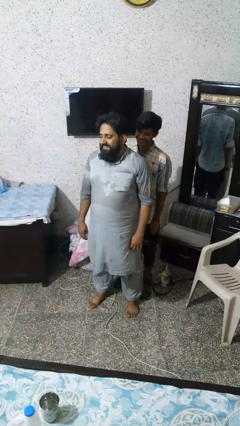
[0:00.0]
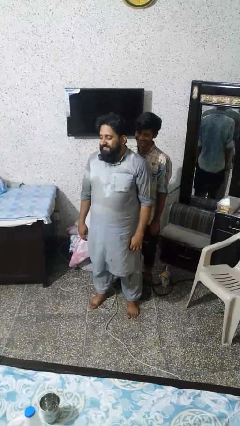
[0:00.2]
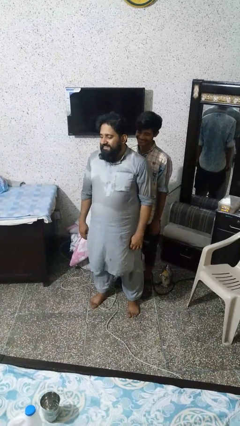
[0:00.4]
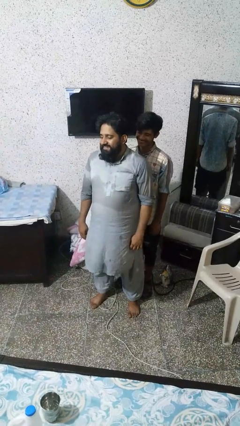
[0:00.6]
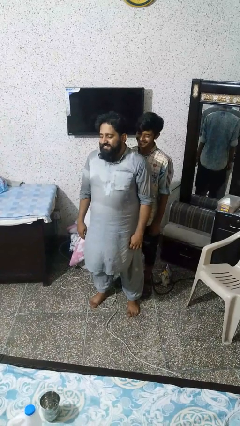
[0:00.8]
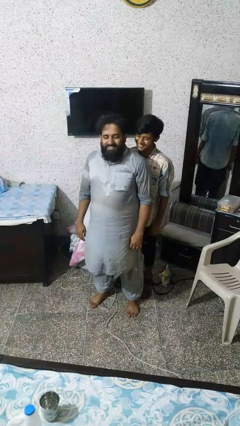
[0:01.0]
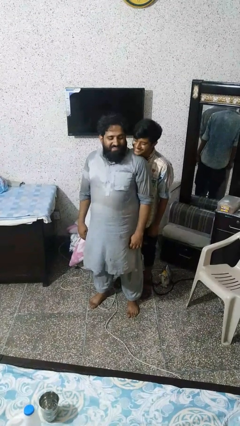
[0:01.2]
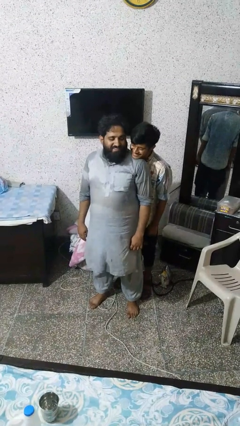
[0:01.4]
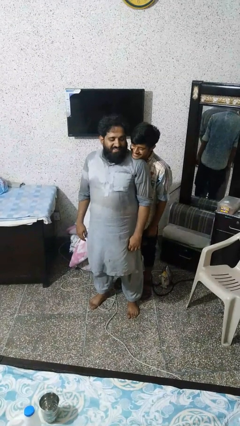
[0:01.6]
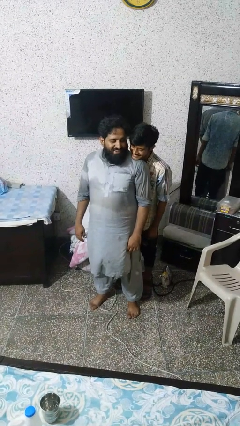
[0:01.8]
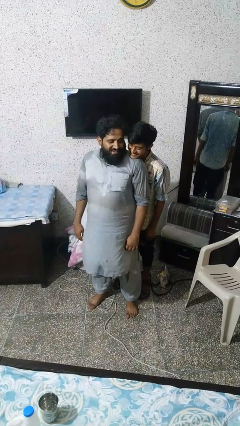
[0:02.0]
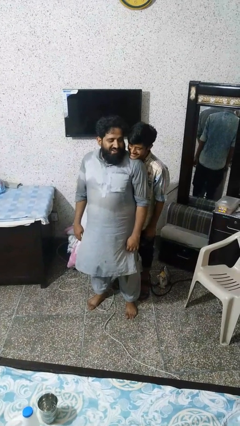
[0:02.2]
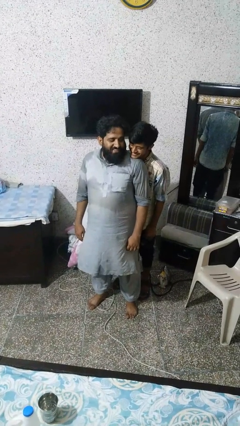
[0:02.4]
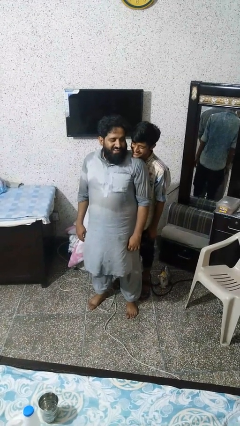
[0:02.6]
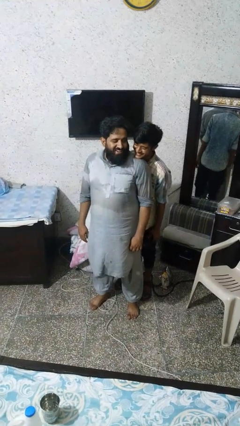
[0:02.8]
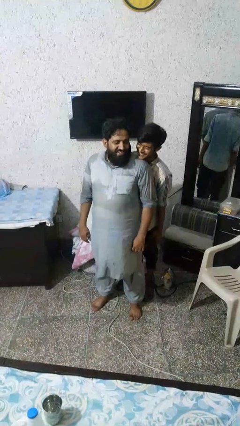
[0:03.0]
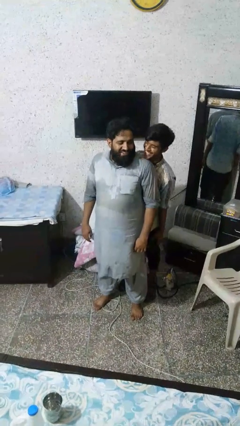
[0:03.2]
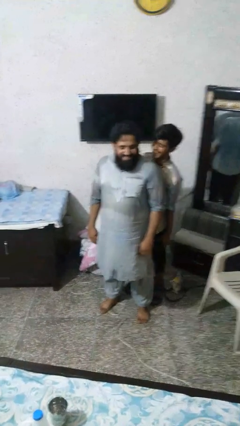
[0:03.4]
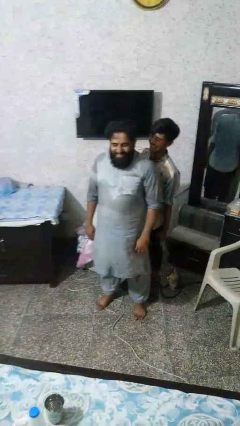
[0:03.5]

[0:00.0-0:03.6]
person looks over shoulder

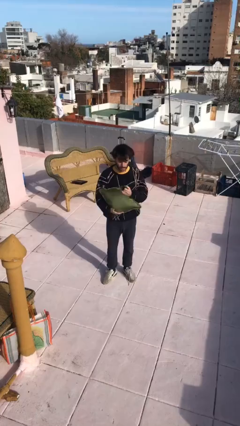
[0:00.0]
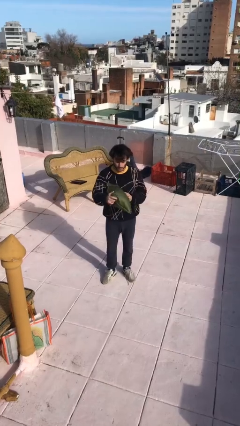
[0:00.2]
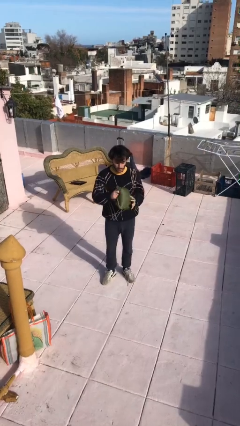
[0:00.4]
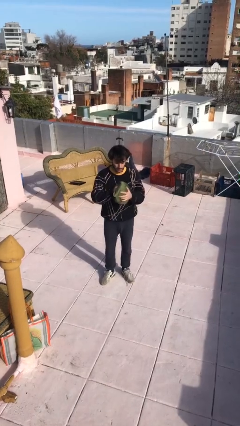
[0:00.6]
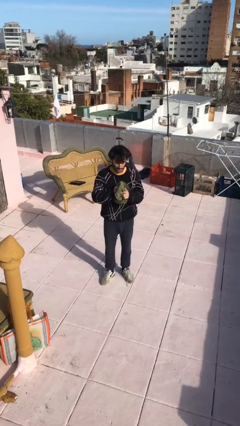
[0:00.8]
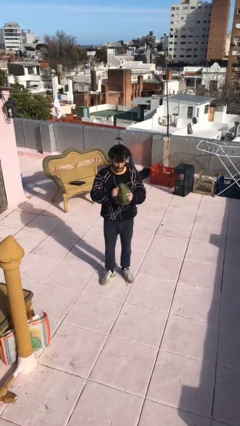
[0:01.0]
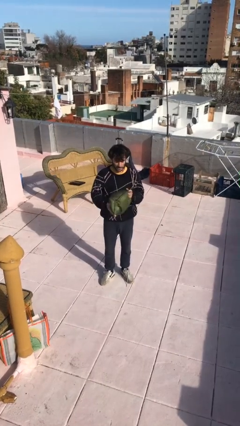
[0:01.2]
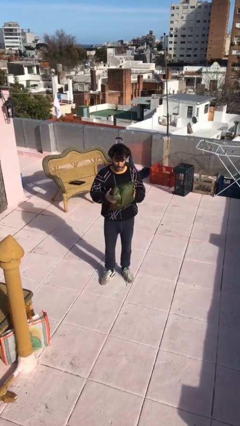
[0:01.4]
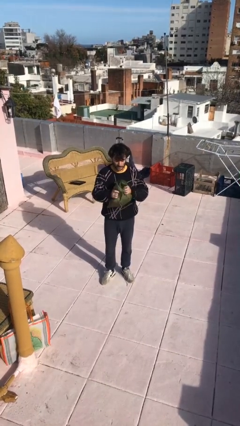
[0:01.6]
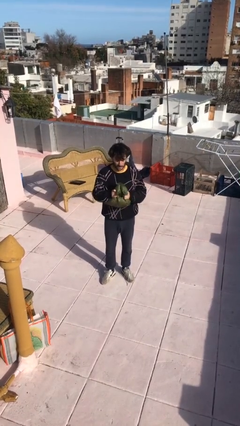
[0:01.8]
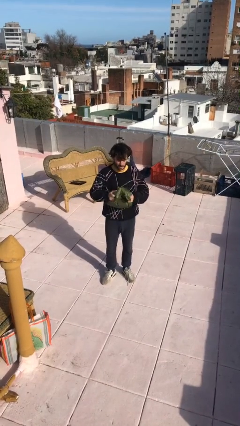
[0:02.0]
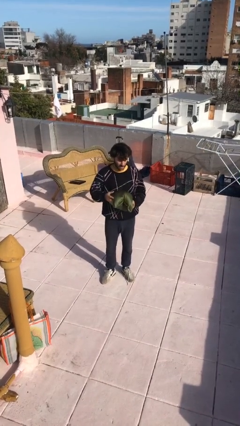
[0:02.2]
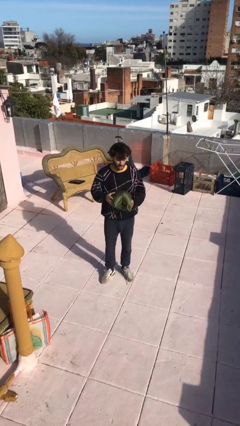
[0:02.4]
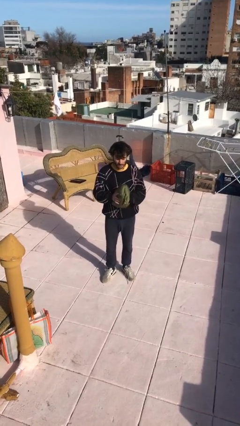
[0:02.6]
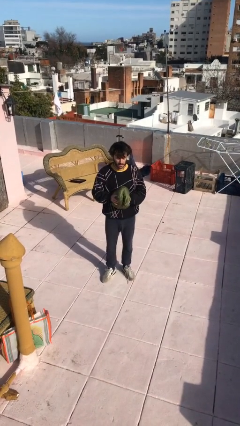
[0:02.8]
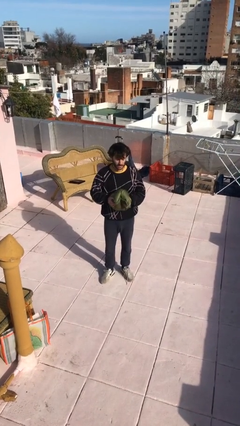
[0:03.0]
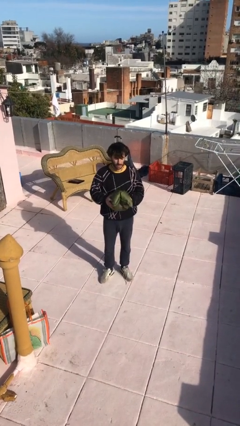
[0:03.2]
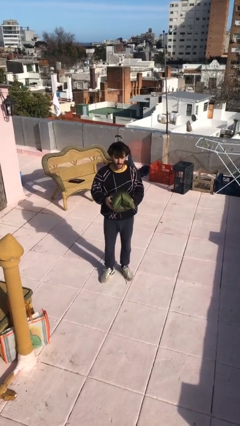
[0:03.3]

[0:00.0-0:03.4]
person squeezes object

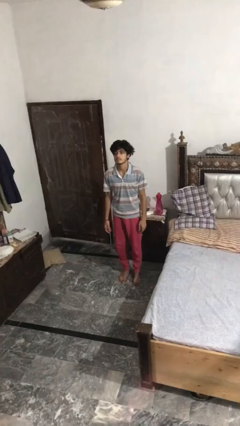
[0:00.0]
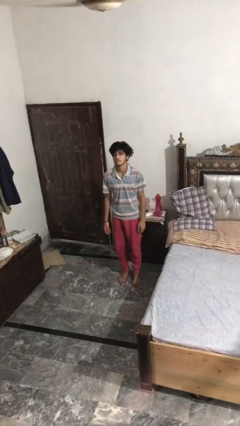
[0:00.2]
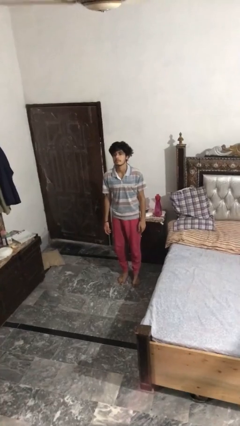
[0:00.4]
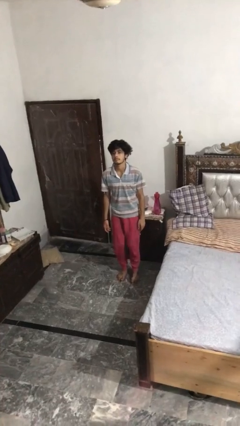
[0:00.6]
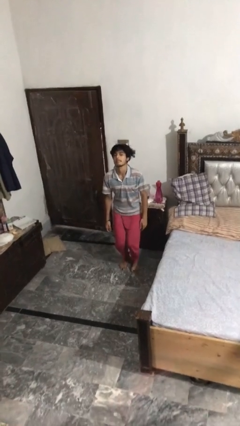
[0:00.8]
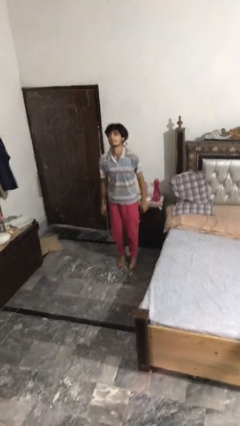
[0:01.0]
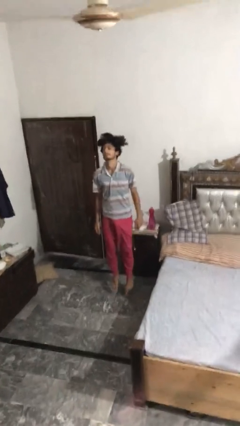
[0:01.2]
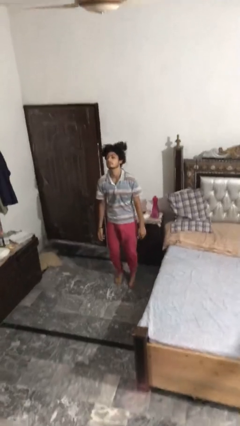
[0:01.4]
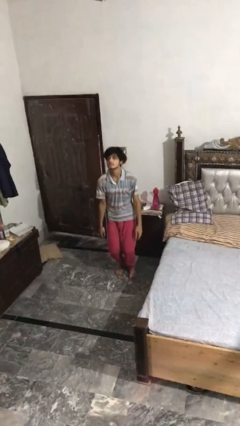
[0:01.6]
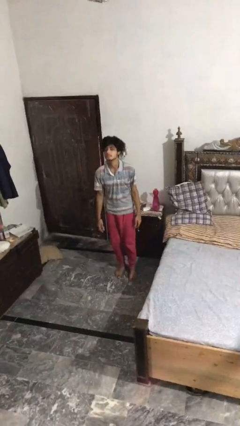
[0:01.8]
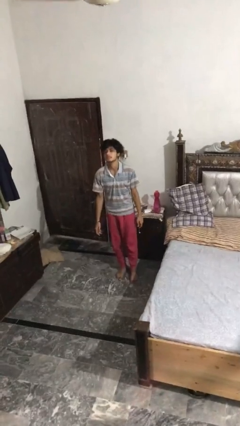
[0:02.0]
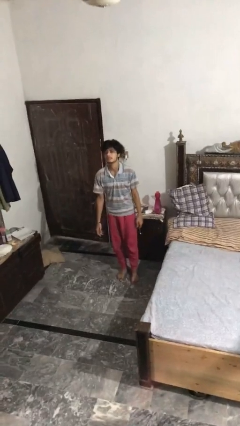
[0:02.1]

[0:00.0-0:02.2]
person jumps

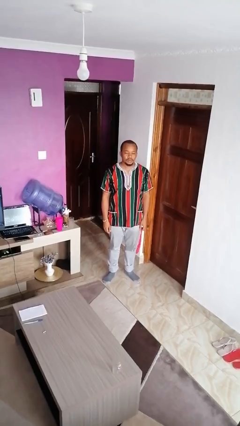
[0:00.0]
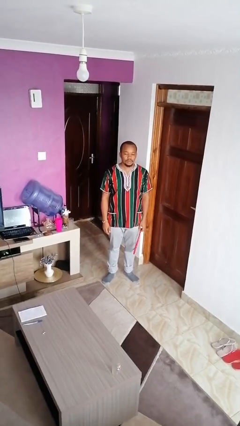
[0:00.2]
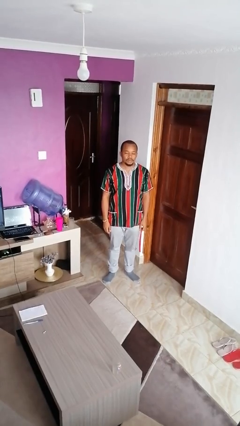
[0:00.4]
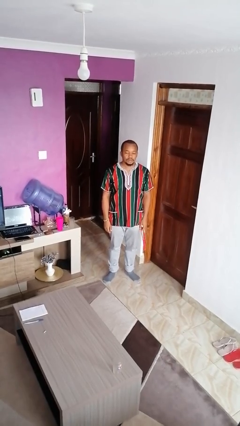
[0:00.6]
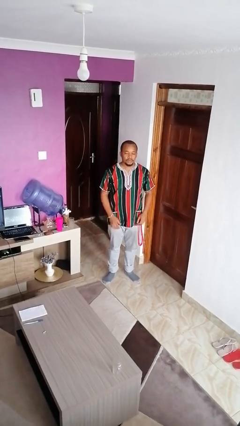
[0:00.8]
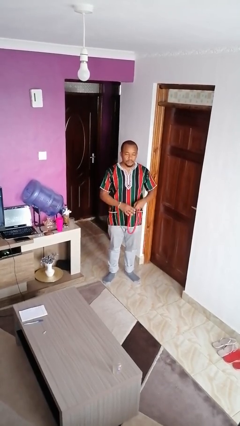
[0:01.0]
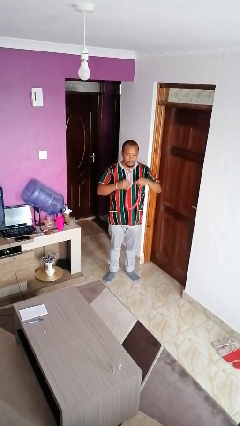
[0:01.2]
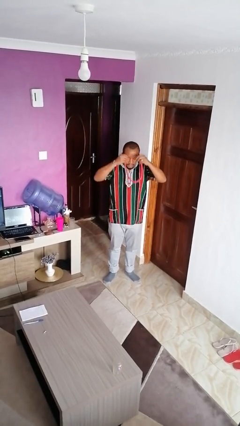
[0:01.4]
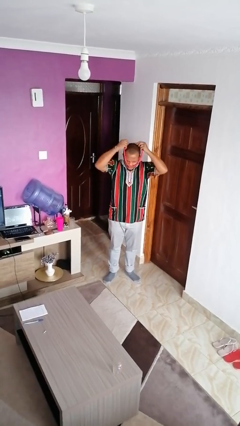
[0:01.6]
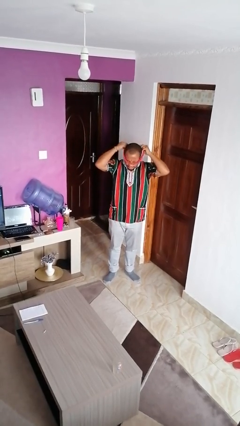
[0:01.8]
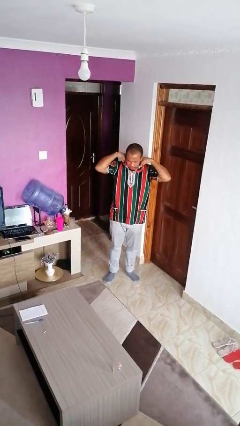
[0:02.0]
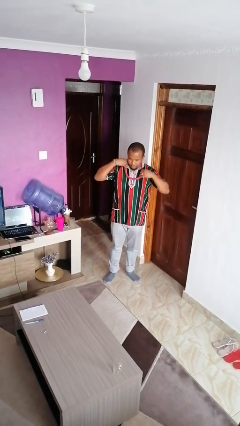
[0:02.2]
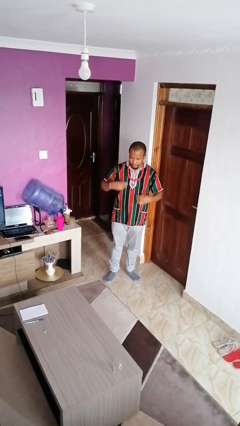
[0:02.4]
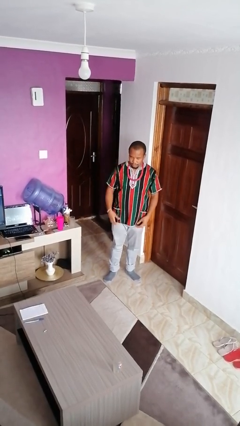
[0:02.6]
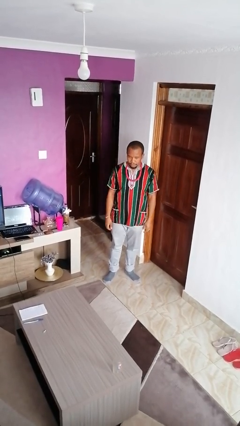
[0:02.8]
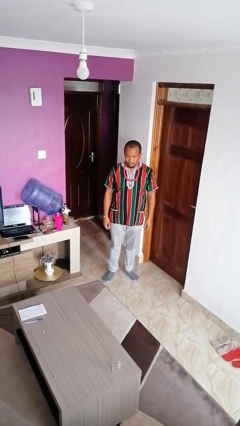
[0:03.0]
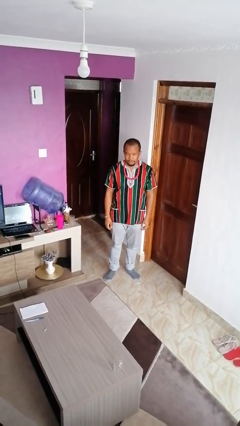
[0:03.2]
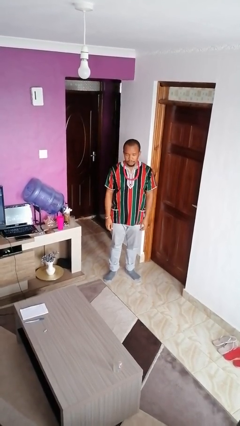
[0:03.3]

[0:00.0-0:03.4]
person puts on necklace

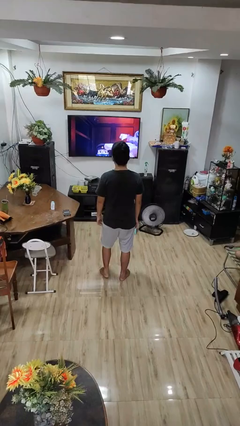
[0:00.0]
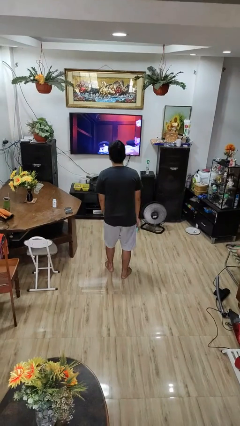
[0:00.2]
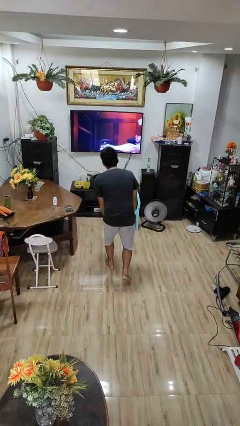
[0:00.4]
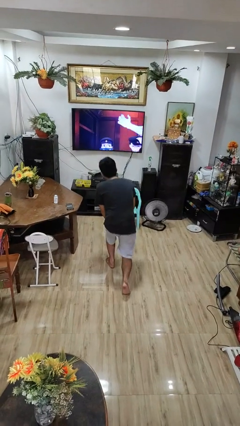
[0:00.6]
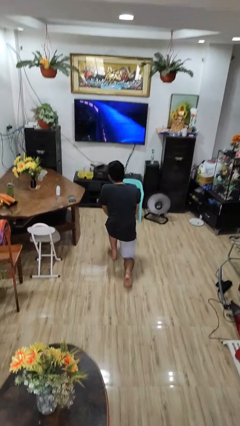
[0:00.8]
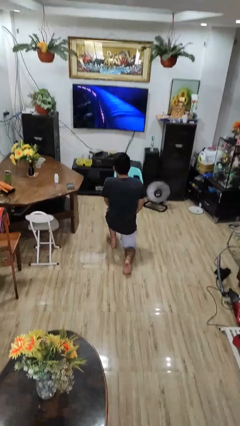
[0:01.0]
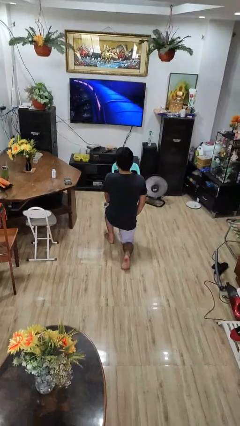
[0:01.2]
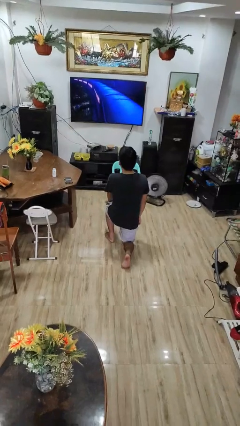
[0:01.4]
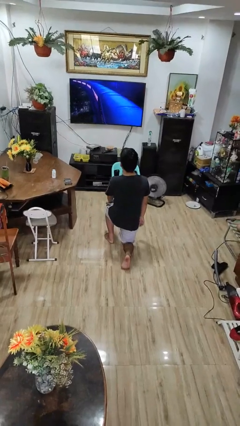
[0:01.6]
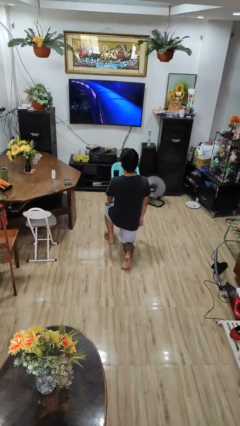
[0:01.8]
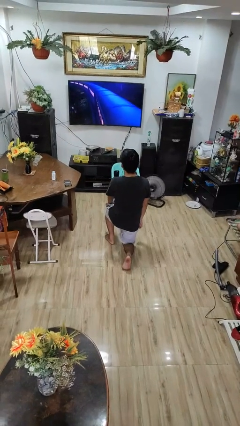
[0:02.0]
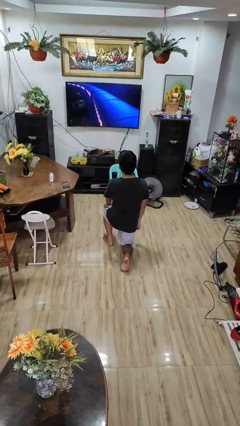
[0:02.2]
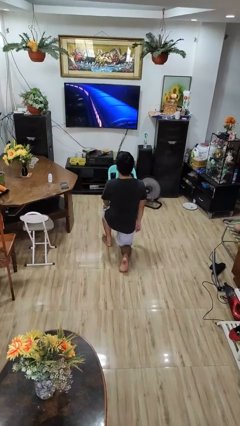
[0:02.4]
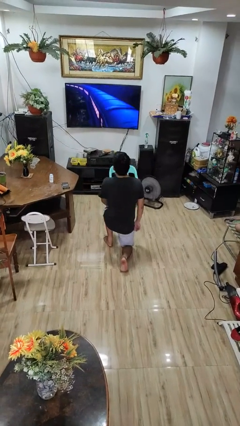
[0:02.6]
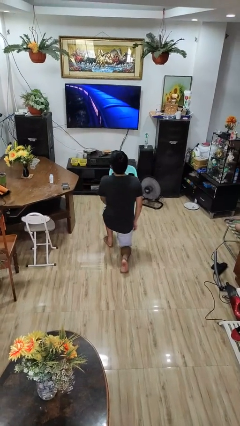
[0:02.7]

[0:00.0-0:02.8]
person kneels

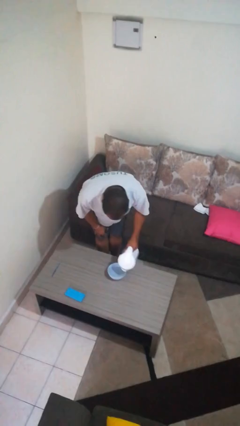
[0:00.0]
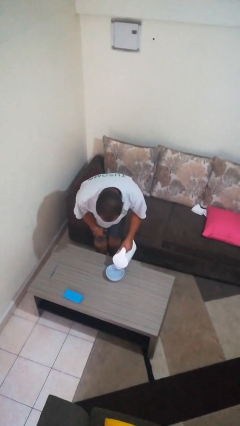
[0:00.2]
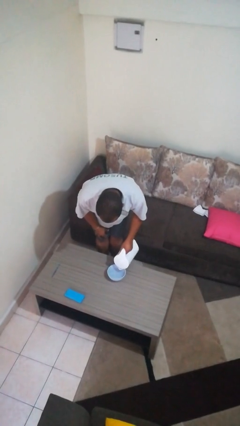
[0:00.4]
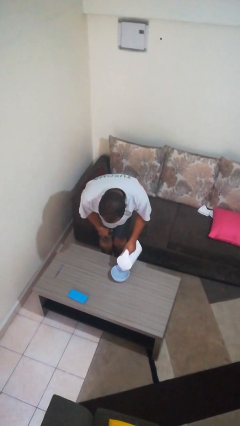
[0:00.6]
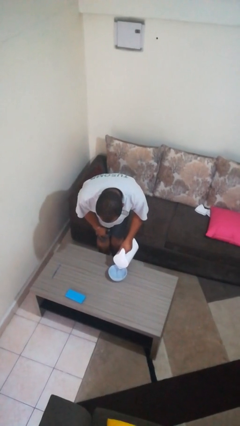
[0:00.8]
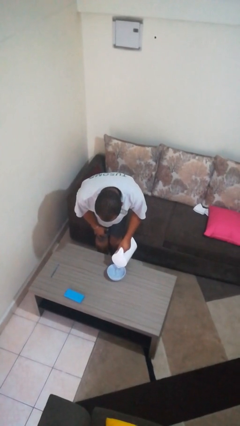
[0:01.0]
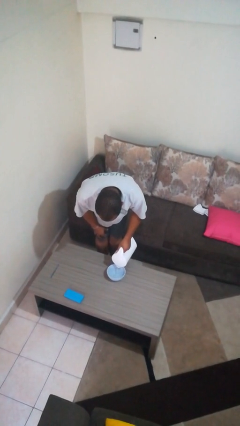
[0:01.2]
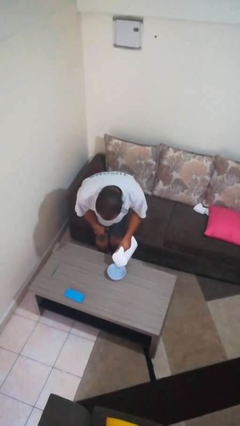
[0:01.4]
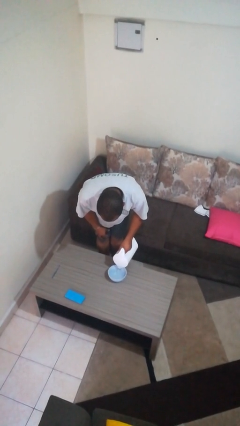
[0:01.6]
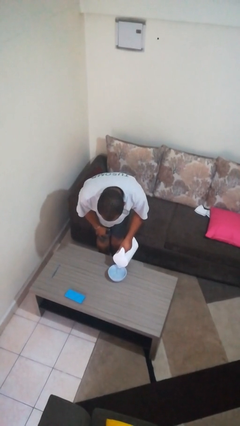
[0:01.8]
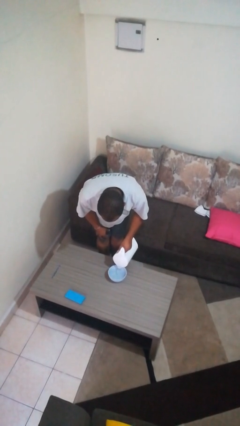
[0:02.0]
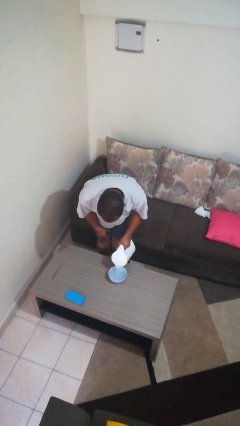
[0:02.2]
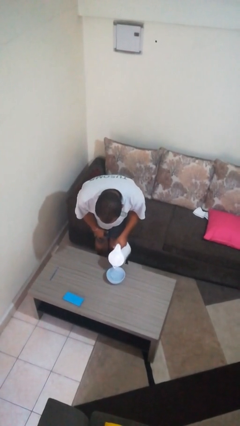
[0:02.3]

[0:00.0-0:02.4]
person pours into bowl
